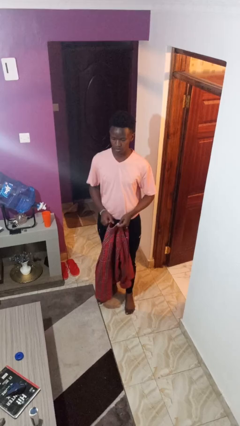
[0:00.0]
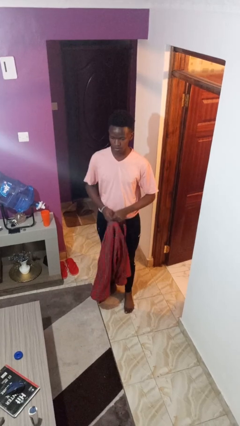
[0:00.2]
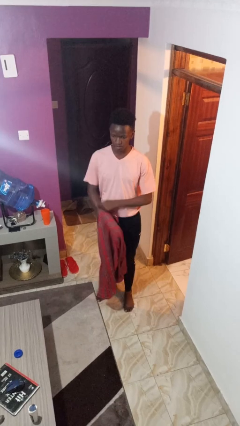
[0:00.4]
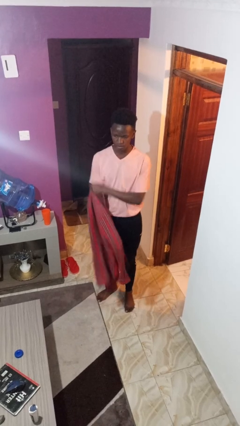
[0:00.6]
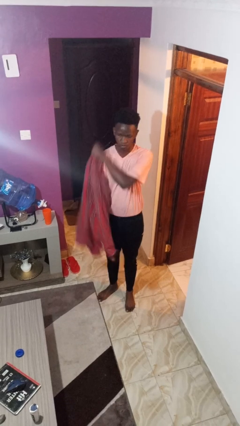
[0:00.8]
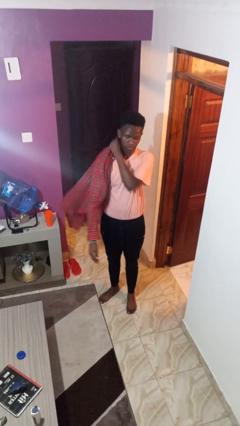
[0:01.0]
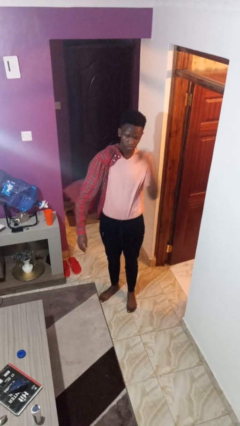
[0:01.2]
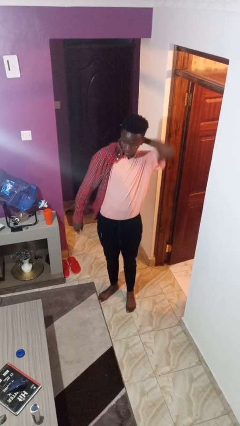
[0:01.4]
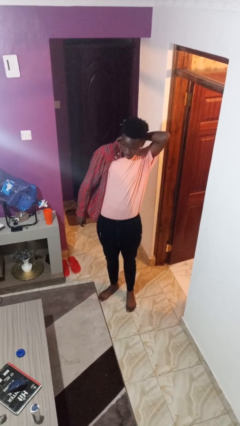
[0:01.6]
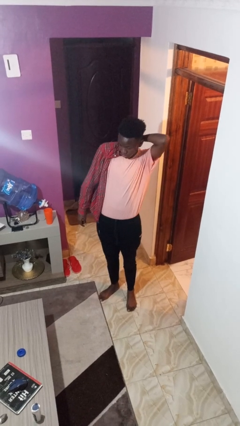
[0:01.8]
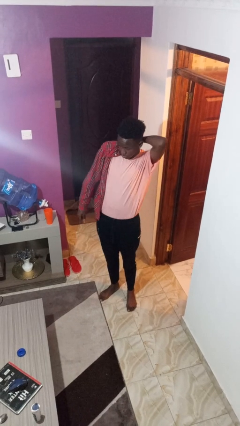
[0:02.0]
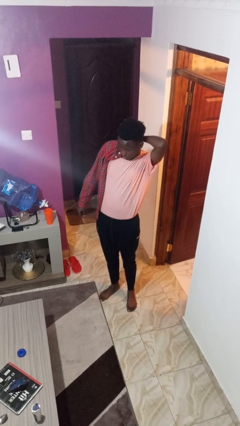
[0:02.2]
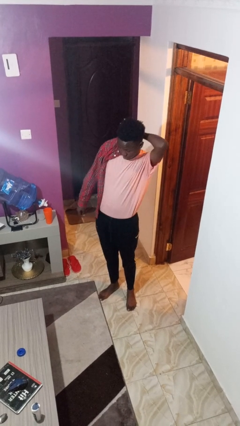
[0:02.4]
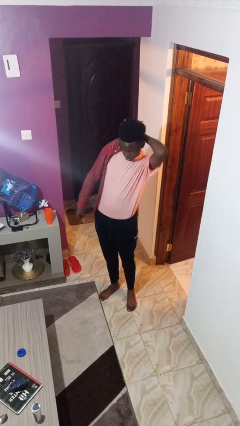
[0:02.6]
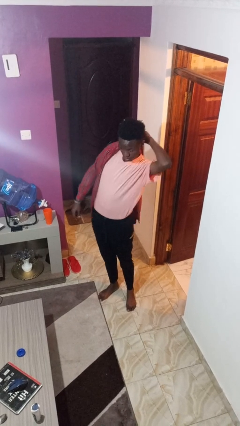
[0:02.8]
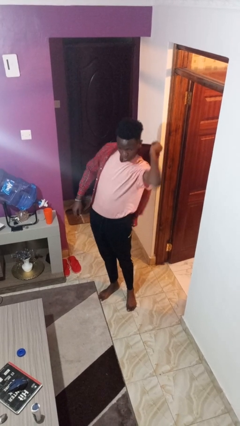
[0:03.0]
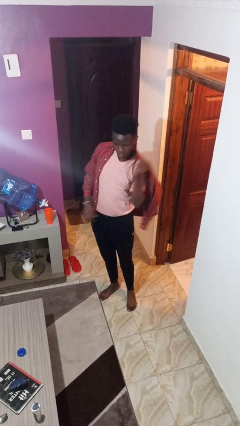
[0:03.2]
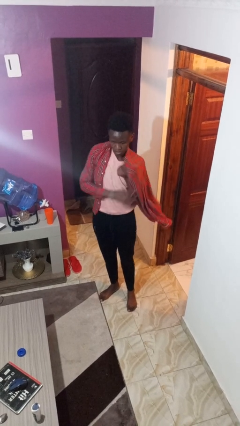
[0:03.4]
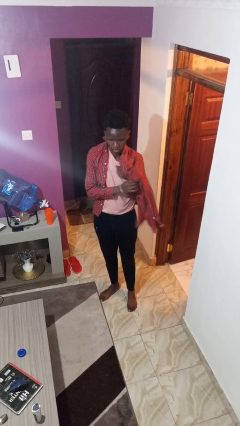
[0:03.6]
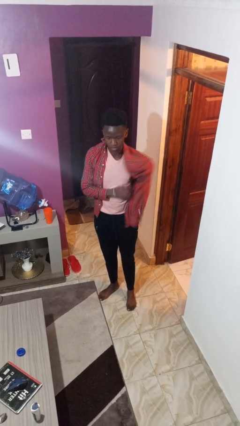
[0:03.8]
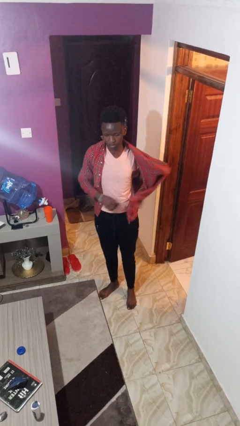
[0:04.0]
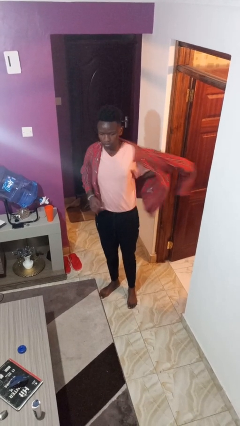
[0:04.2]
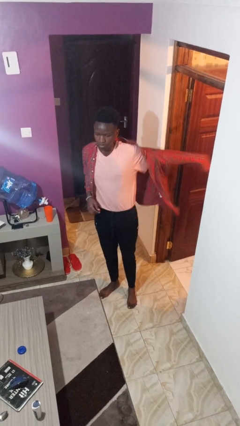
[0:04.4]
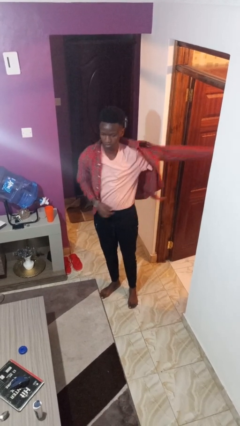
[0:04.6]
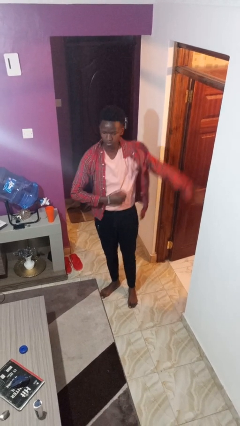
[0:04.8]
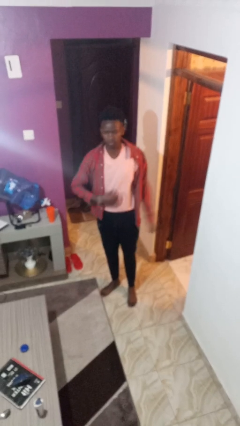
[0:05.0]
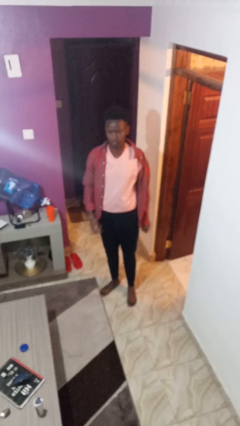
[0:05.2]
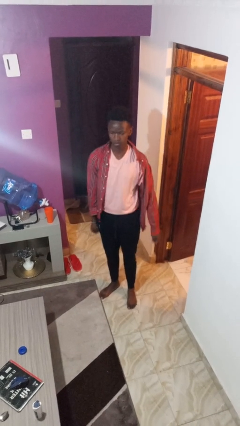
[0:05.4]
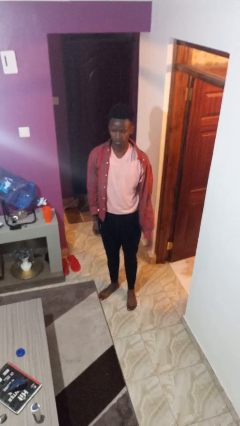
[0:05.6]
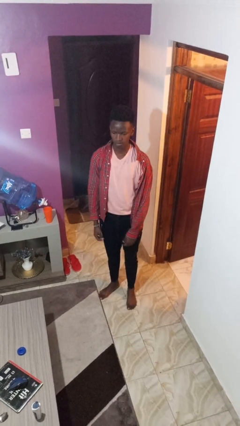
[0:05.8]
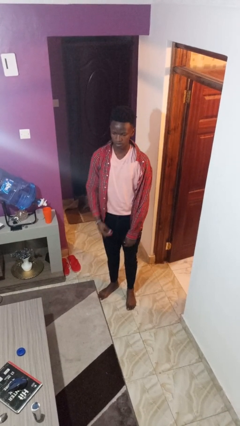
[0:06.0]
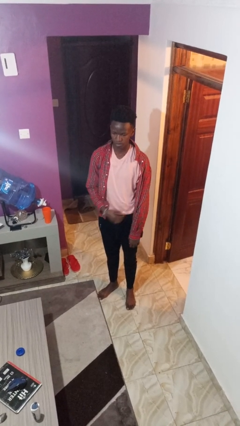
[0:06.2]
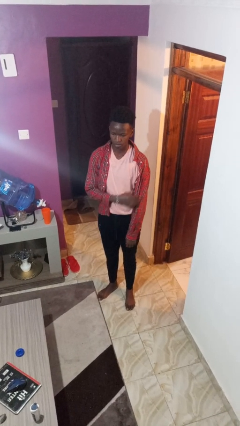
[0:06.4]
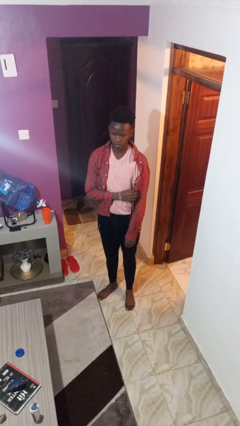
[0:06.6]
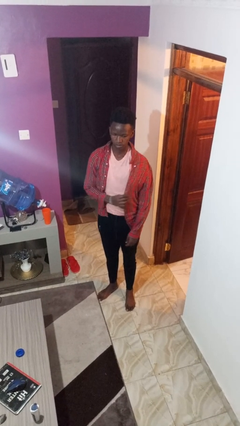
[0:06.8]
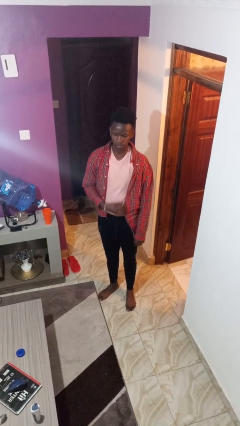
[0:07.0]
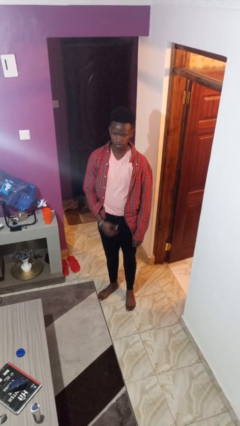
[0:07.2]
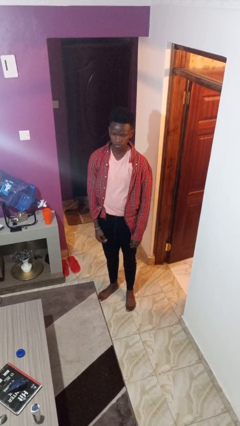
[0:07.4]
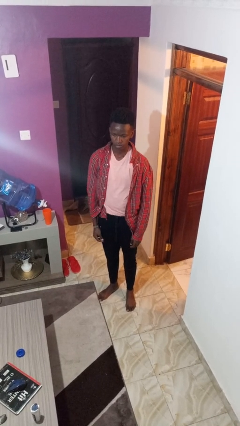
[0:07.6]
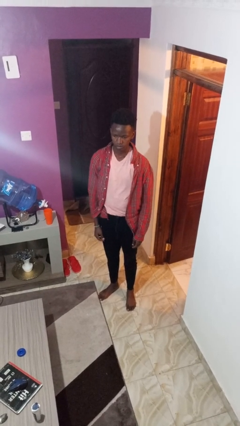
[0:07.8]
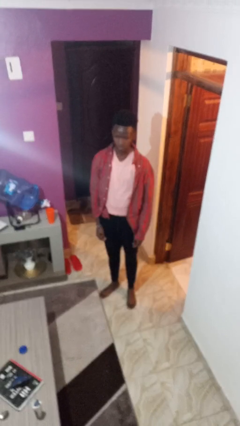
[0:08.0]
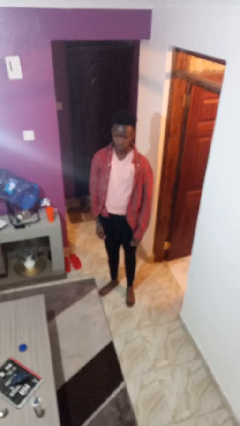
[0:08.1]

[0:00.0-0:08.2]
person puts on shirt

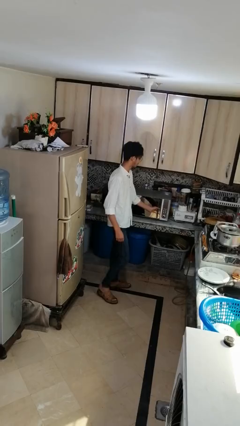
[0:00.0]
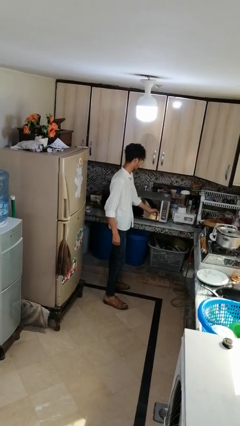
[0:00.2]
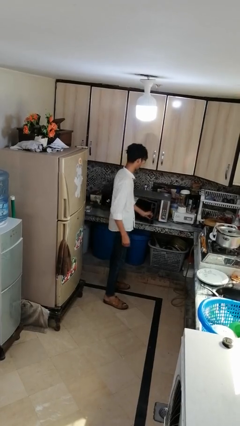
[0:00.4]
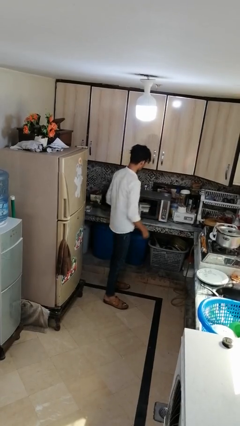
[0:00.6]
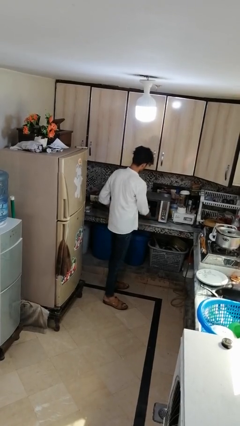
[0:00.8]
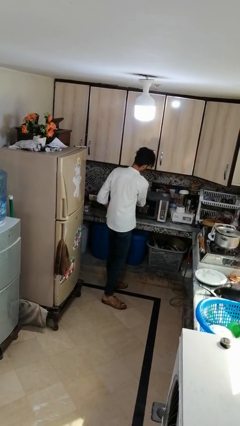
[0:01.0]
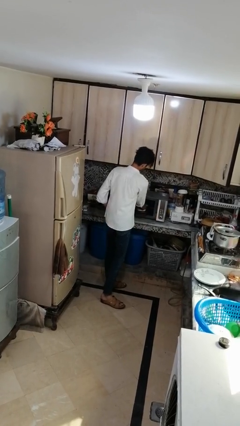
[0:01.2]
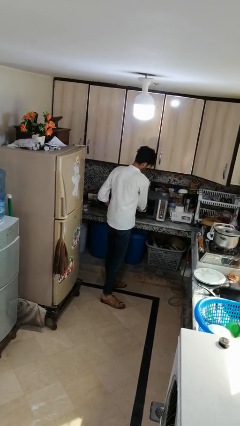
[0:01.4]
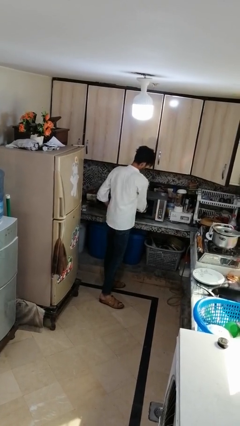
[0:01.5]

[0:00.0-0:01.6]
person takes object from microwave

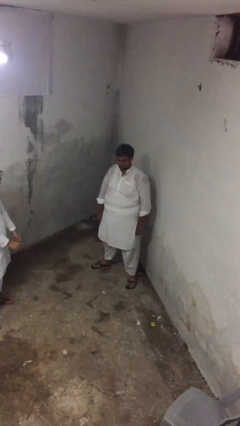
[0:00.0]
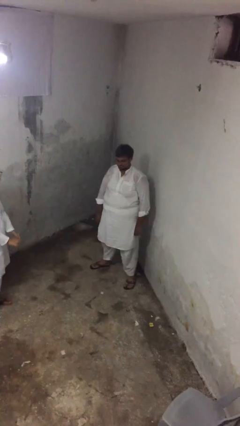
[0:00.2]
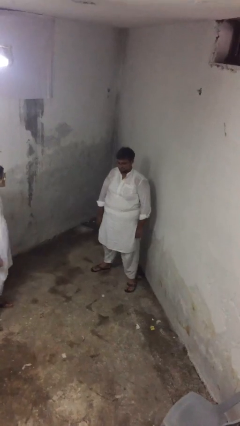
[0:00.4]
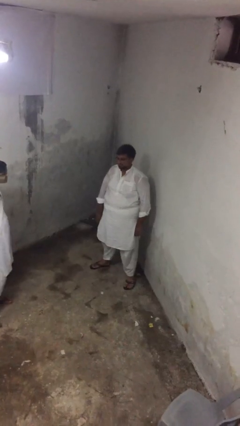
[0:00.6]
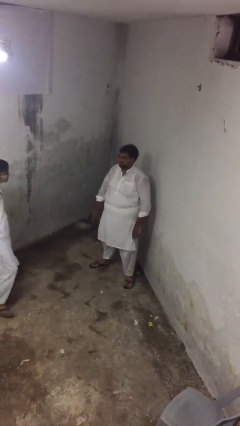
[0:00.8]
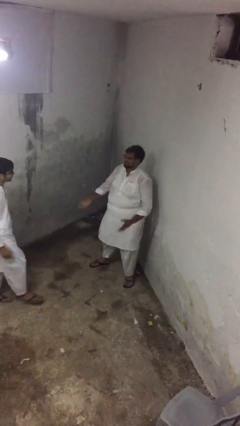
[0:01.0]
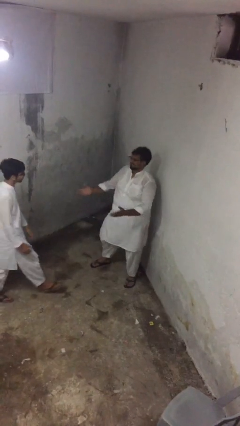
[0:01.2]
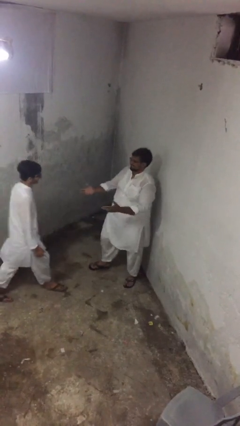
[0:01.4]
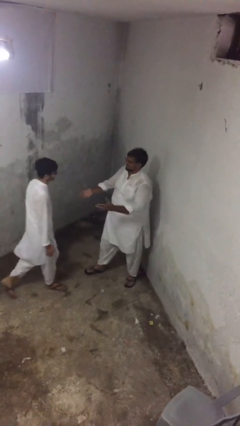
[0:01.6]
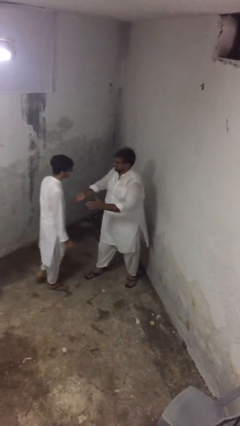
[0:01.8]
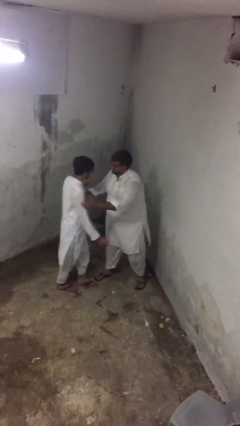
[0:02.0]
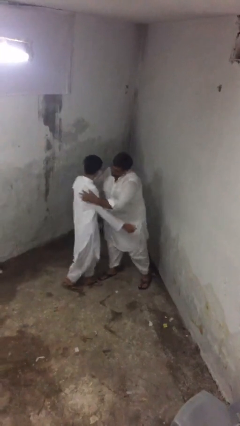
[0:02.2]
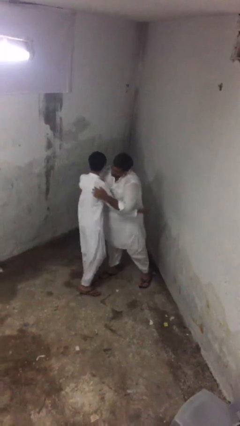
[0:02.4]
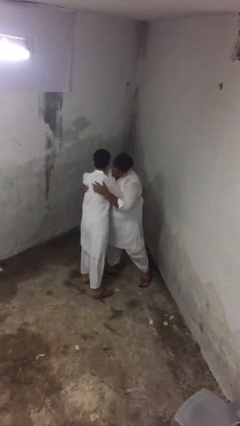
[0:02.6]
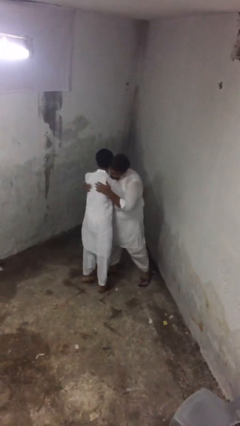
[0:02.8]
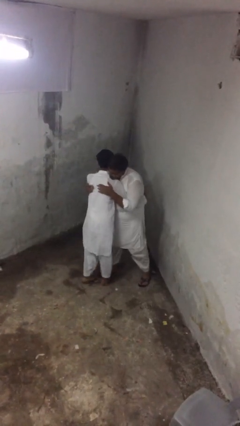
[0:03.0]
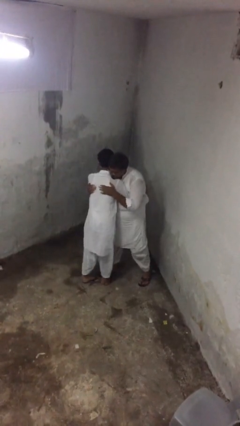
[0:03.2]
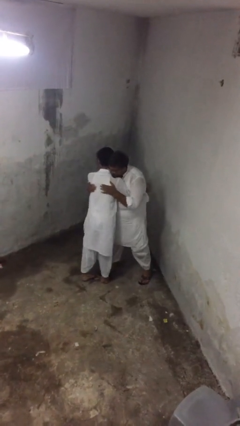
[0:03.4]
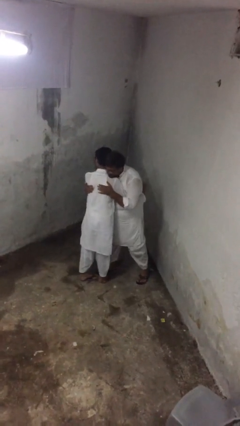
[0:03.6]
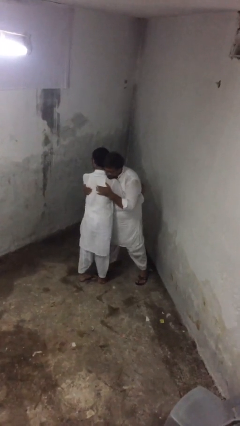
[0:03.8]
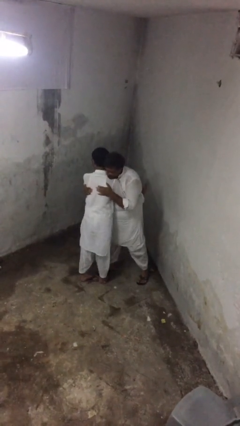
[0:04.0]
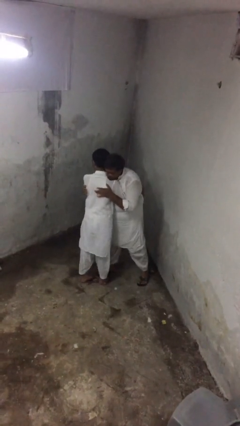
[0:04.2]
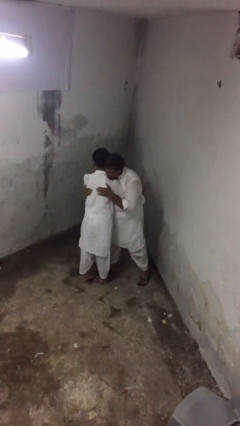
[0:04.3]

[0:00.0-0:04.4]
person embraces person

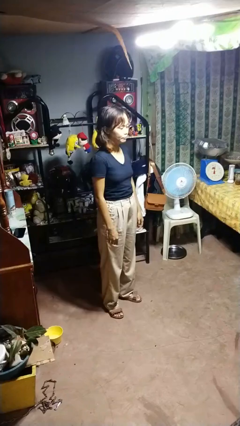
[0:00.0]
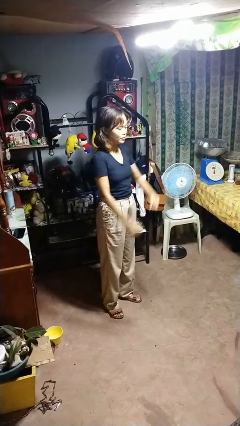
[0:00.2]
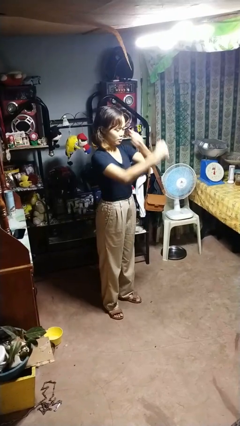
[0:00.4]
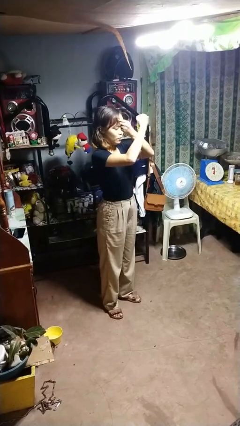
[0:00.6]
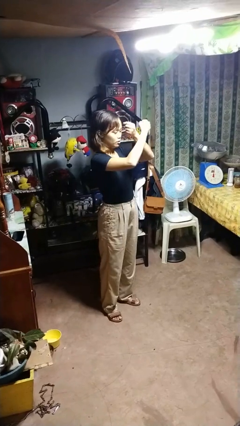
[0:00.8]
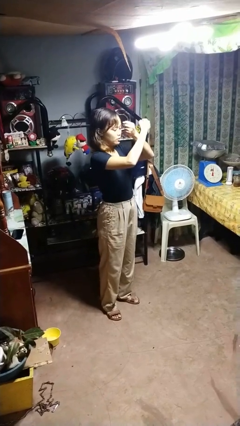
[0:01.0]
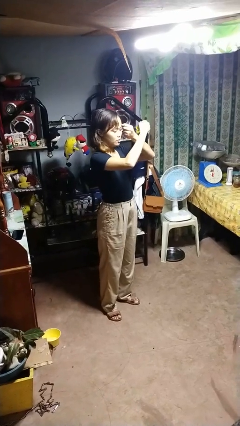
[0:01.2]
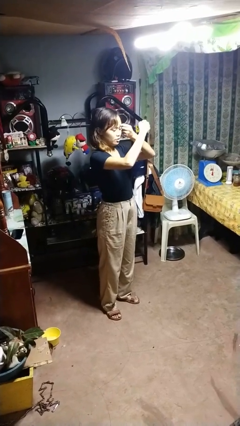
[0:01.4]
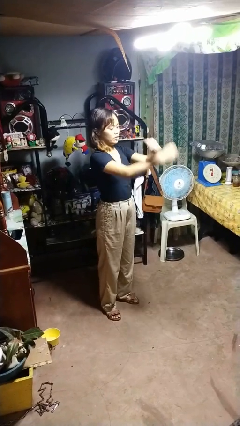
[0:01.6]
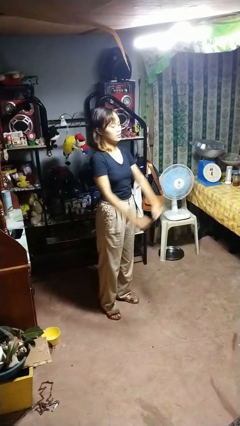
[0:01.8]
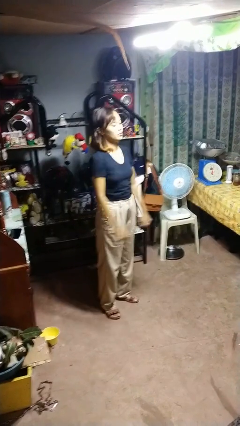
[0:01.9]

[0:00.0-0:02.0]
person gestures arms x

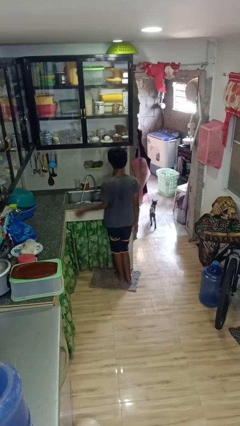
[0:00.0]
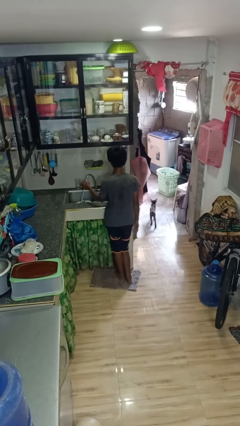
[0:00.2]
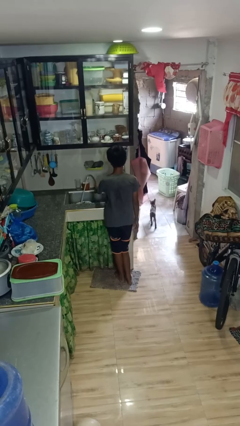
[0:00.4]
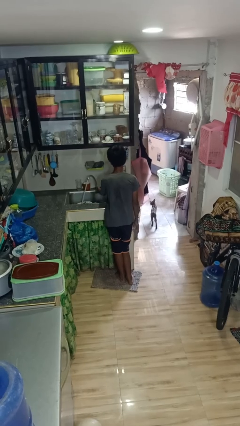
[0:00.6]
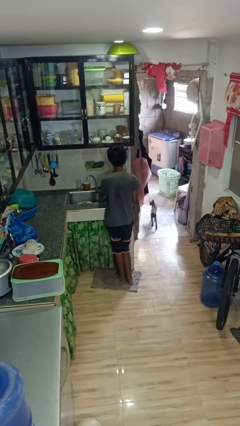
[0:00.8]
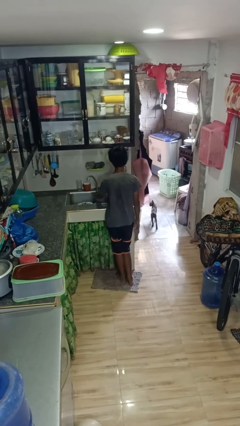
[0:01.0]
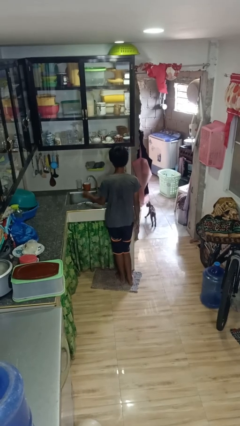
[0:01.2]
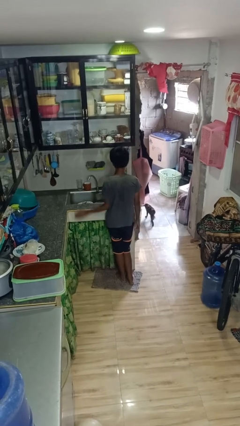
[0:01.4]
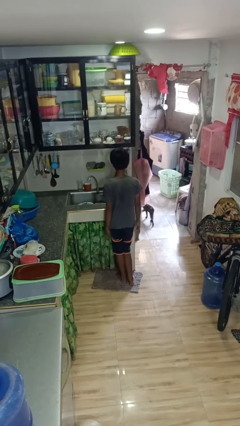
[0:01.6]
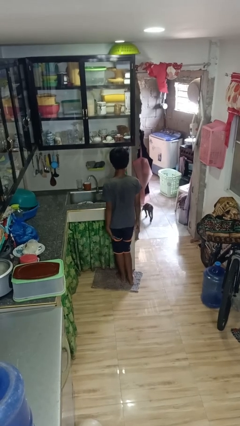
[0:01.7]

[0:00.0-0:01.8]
person turns off faucet
